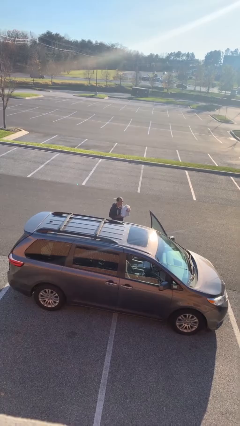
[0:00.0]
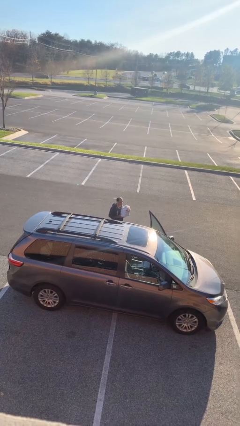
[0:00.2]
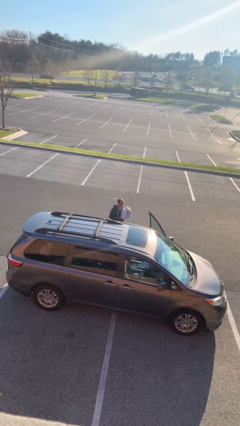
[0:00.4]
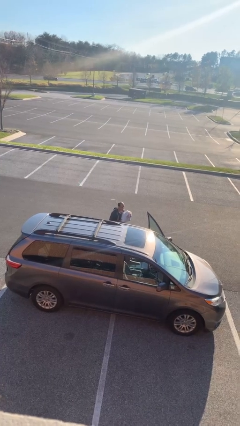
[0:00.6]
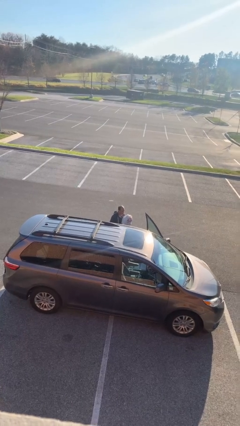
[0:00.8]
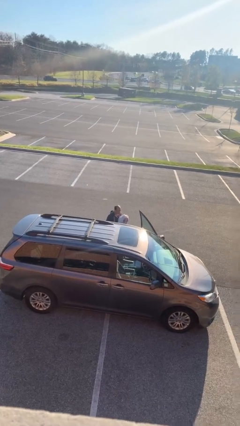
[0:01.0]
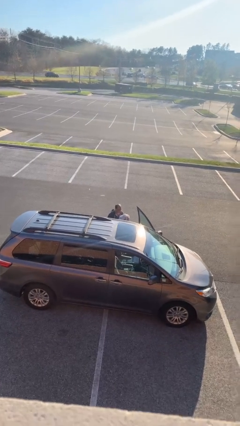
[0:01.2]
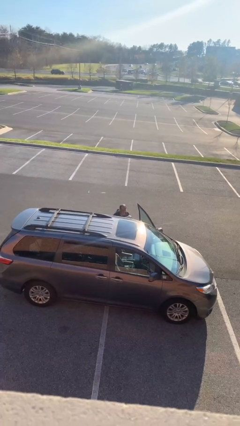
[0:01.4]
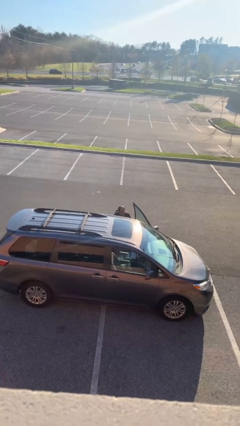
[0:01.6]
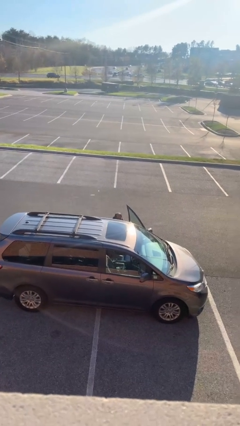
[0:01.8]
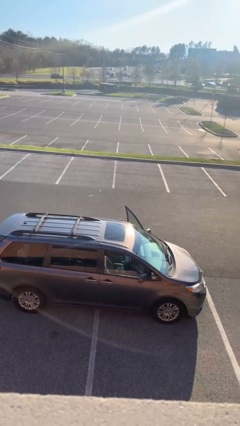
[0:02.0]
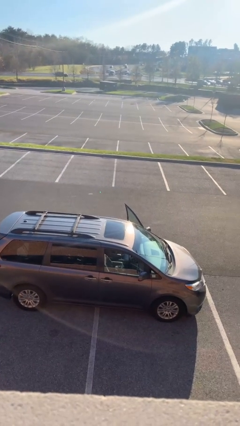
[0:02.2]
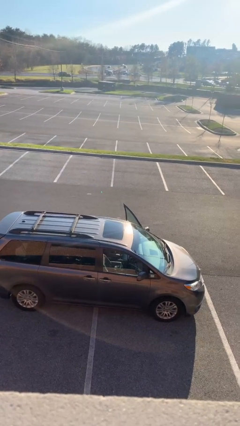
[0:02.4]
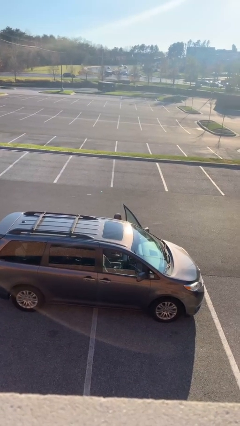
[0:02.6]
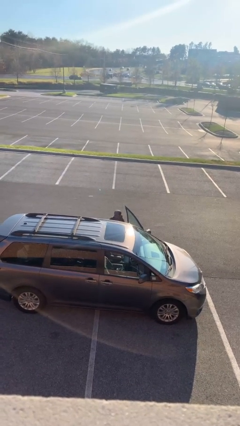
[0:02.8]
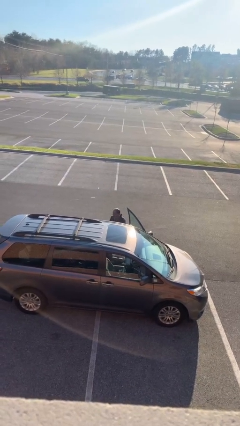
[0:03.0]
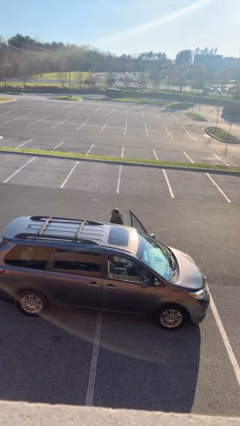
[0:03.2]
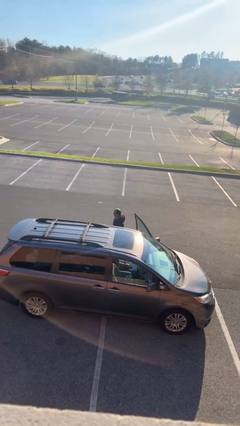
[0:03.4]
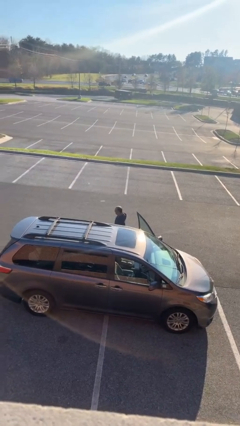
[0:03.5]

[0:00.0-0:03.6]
person loads car

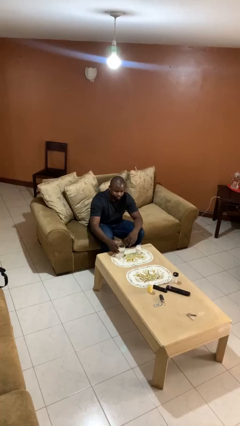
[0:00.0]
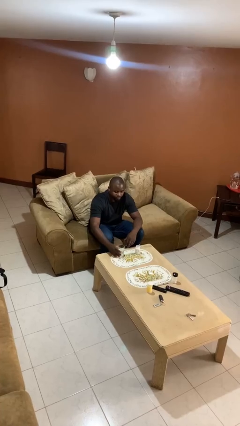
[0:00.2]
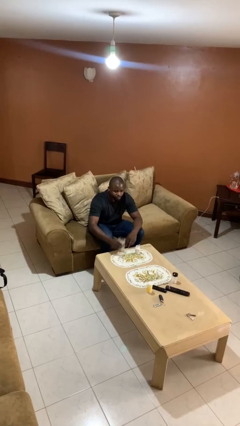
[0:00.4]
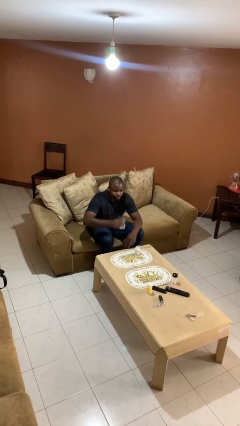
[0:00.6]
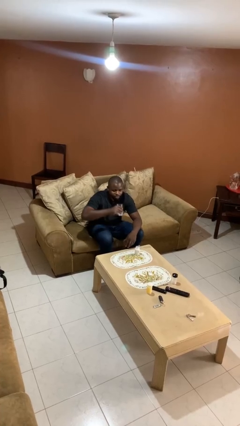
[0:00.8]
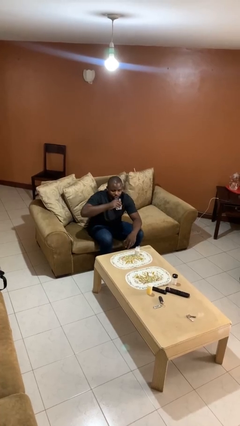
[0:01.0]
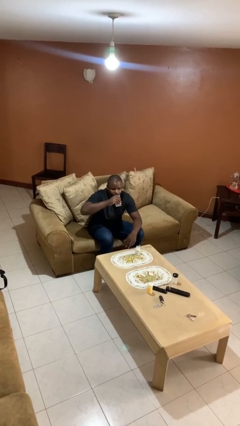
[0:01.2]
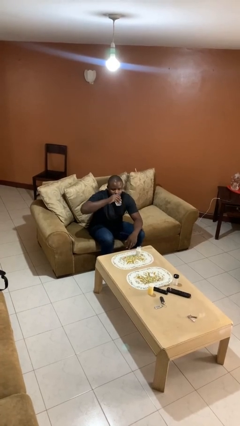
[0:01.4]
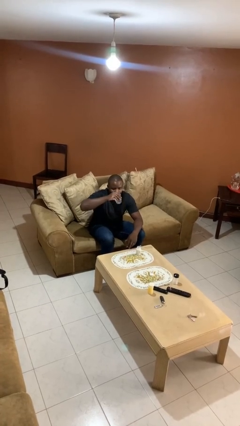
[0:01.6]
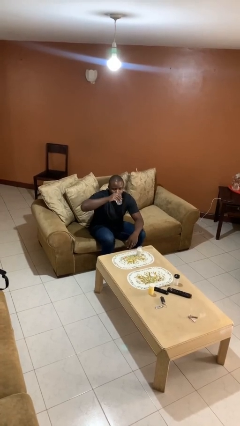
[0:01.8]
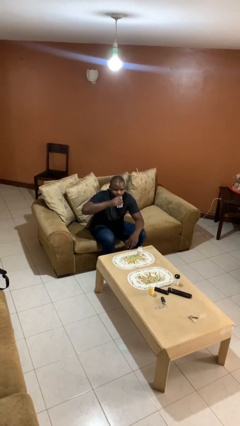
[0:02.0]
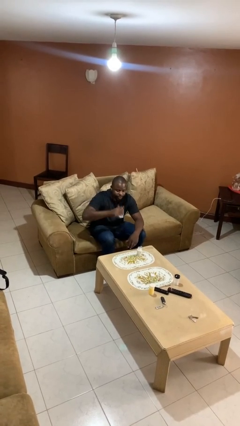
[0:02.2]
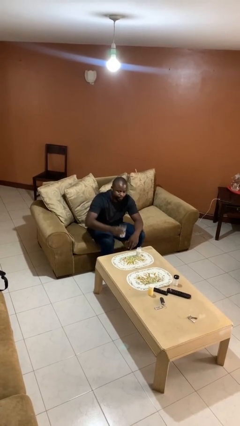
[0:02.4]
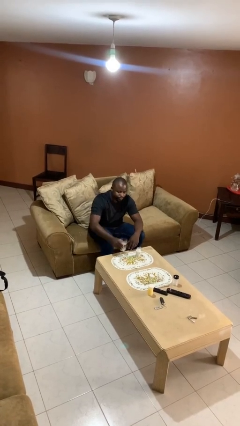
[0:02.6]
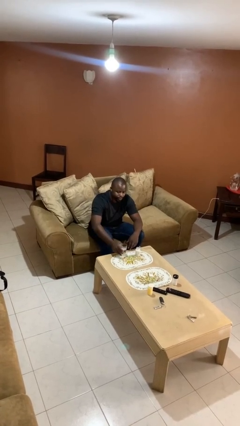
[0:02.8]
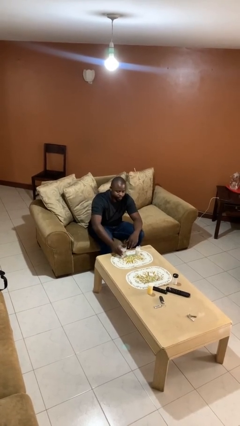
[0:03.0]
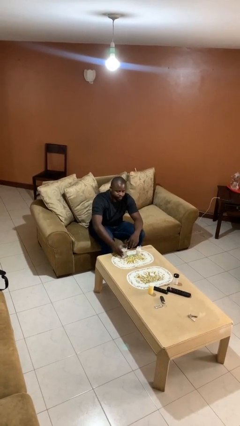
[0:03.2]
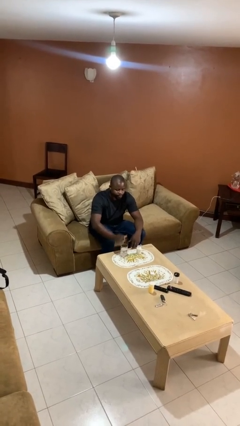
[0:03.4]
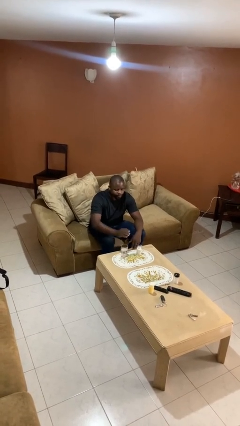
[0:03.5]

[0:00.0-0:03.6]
person drinks from cup

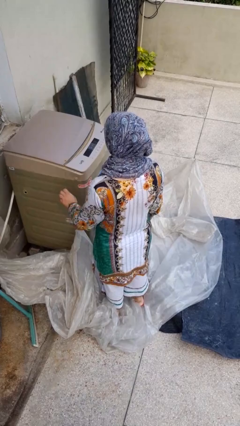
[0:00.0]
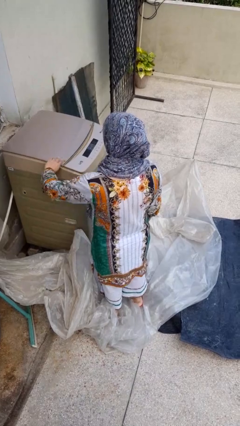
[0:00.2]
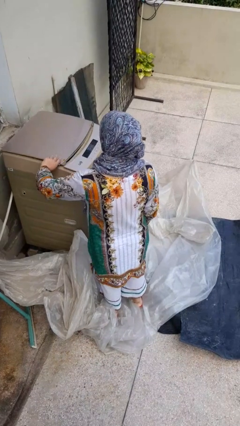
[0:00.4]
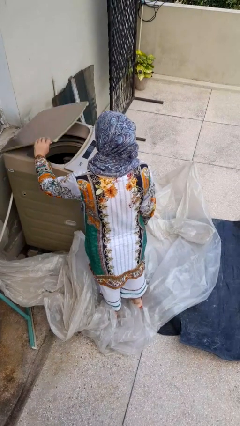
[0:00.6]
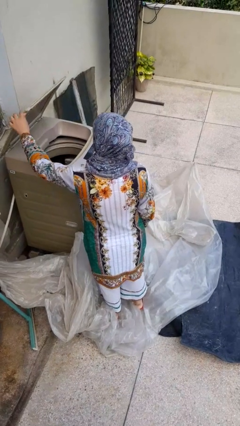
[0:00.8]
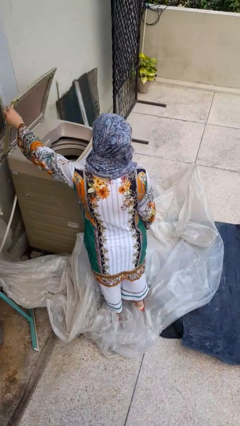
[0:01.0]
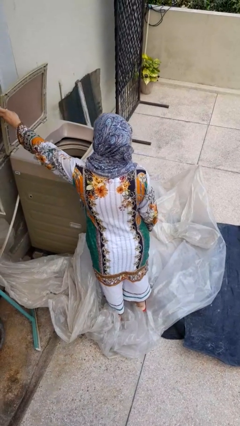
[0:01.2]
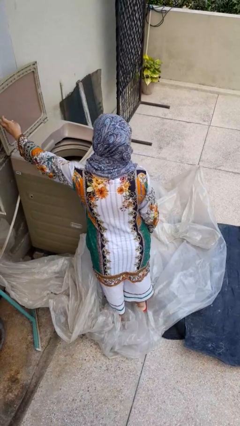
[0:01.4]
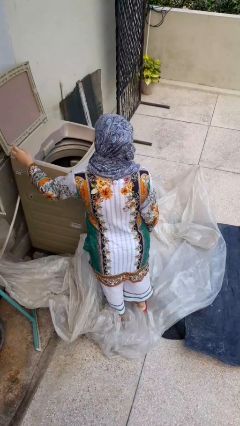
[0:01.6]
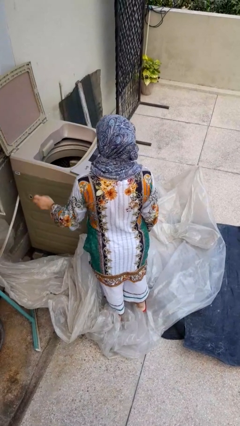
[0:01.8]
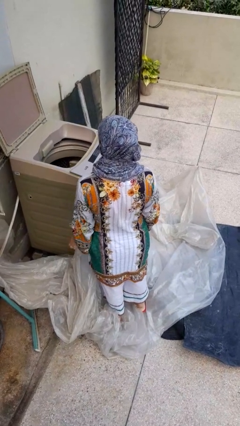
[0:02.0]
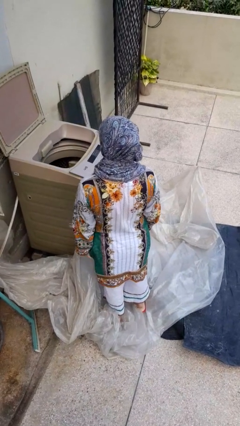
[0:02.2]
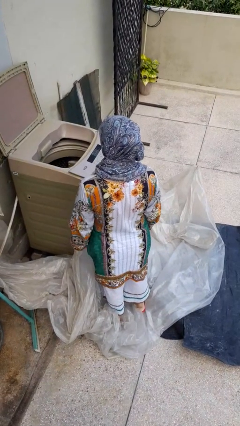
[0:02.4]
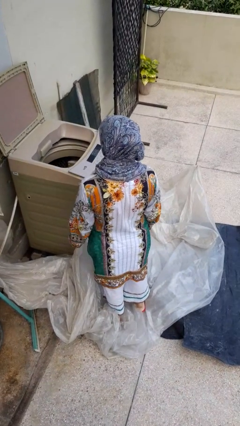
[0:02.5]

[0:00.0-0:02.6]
person opens clothes washer

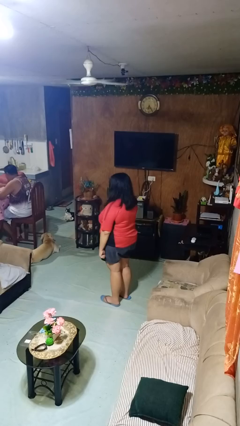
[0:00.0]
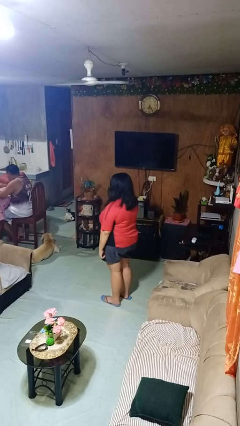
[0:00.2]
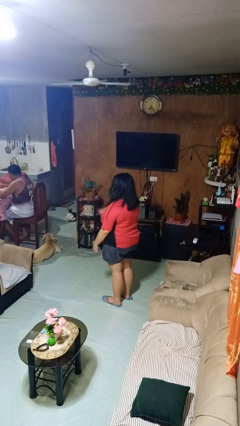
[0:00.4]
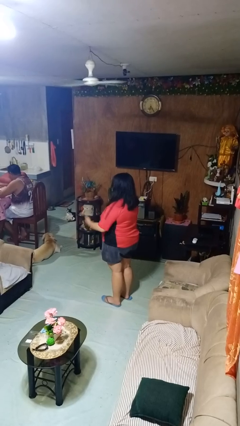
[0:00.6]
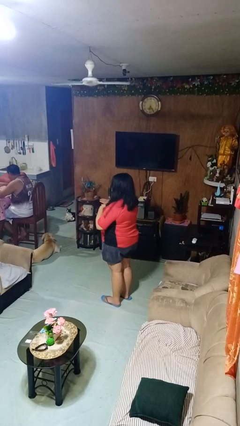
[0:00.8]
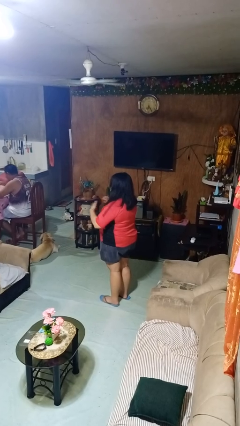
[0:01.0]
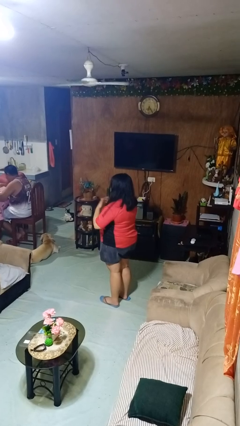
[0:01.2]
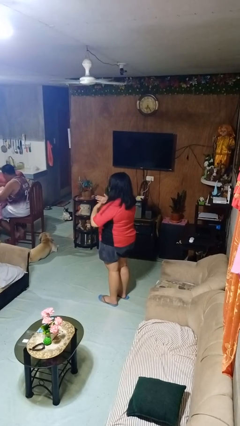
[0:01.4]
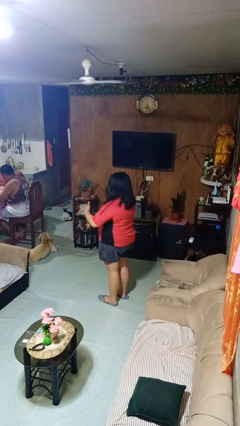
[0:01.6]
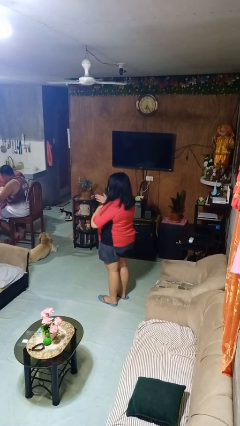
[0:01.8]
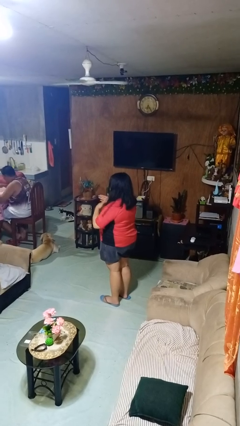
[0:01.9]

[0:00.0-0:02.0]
person drums on chest

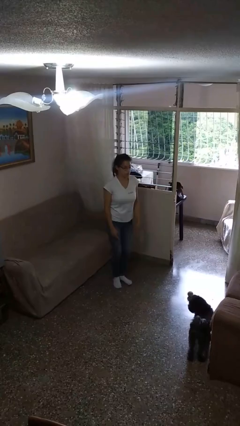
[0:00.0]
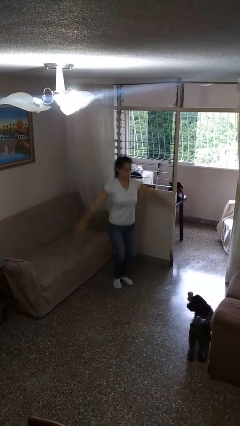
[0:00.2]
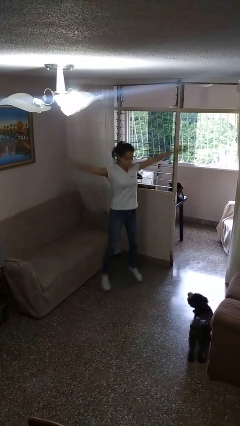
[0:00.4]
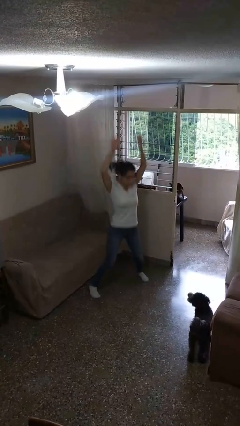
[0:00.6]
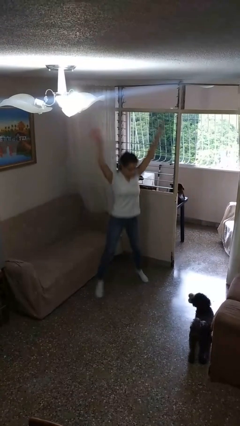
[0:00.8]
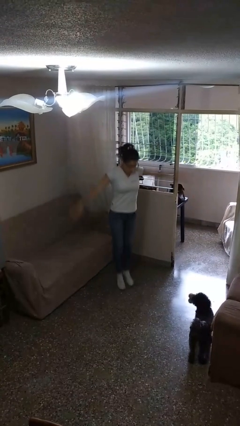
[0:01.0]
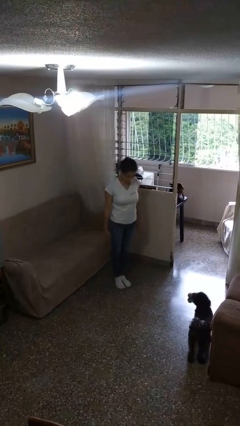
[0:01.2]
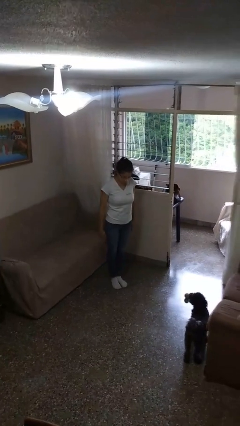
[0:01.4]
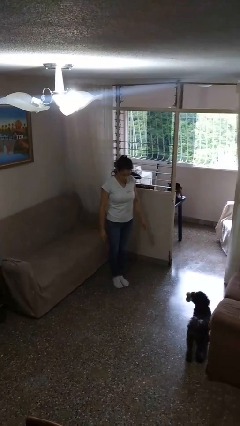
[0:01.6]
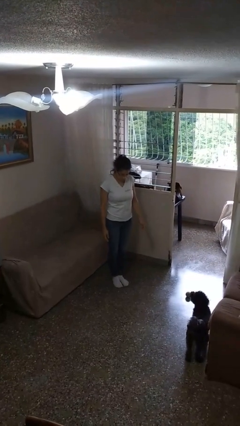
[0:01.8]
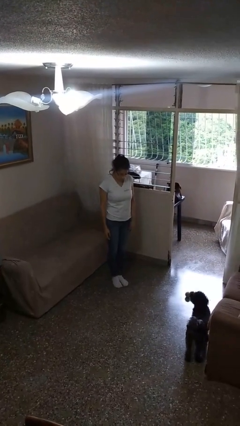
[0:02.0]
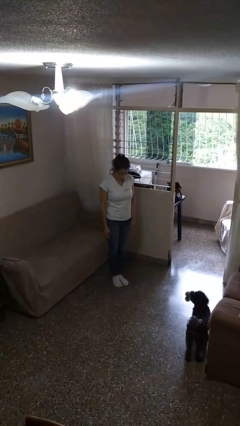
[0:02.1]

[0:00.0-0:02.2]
person exercises with jumping jacks

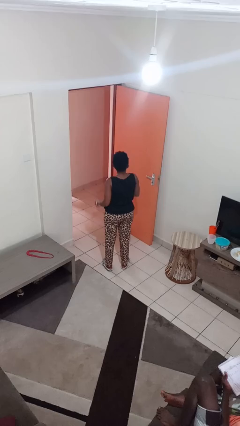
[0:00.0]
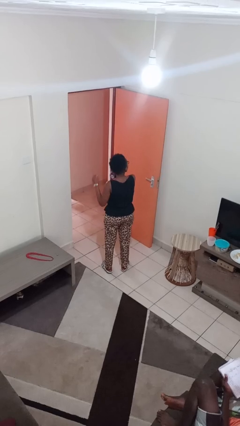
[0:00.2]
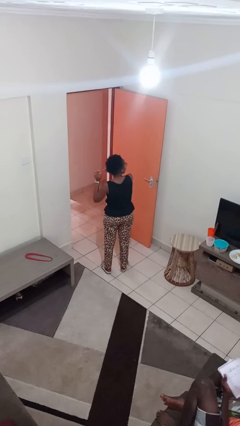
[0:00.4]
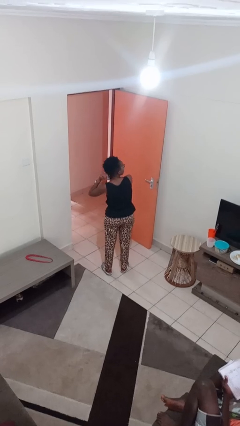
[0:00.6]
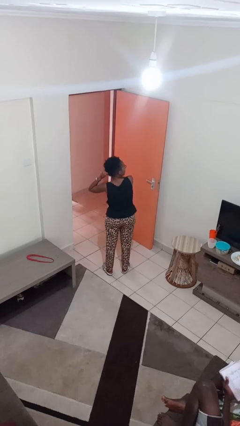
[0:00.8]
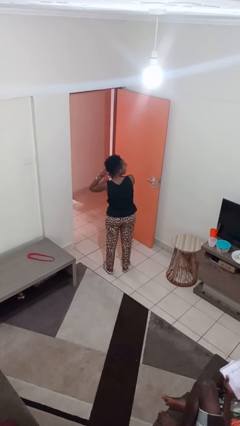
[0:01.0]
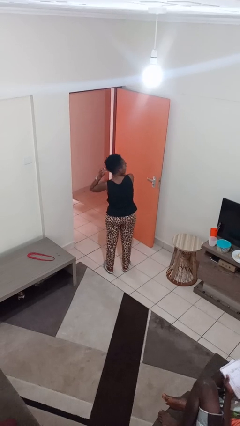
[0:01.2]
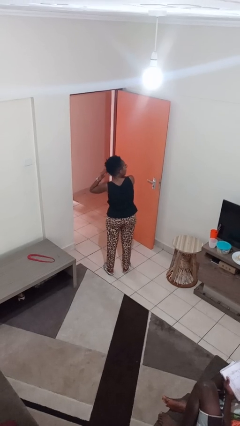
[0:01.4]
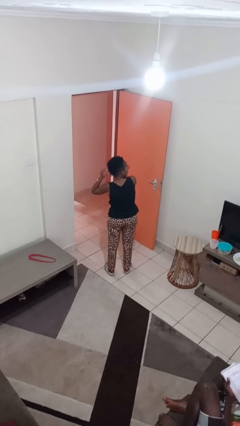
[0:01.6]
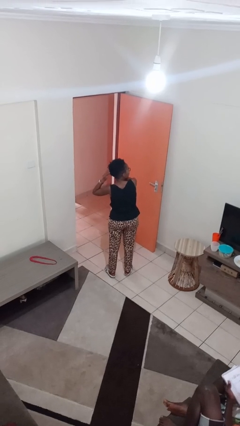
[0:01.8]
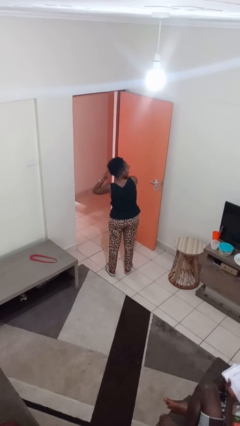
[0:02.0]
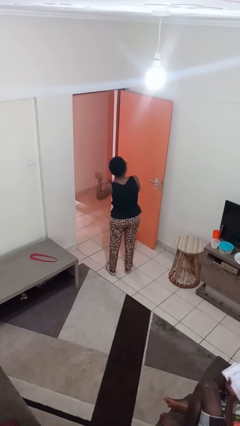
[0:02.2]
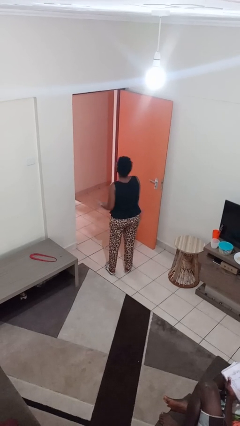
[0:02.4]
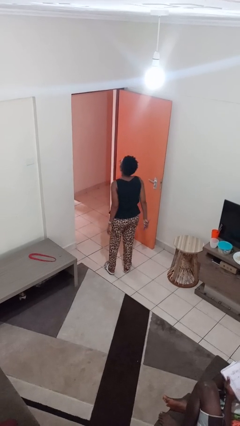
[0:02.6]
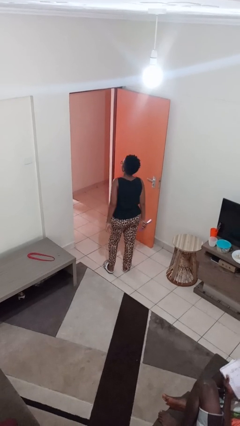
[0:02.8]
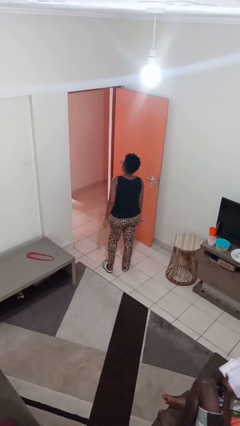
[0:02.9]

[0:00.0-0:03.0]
person brushes hair

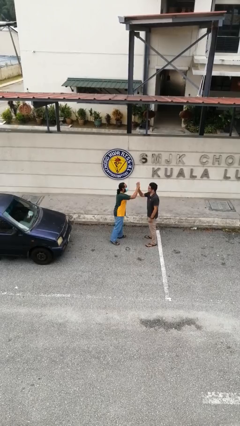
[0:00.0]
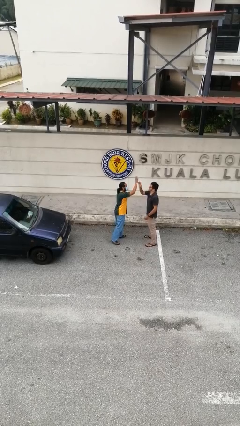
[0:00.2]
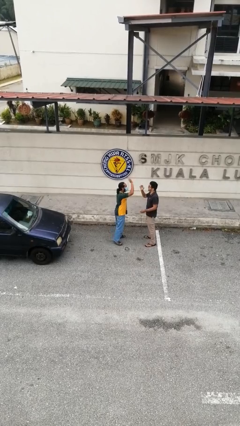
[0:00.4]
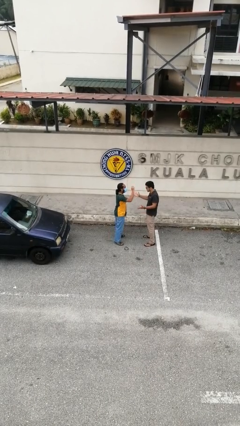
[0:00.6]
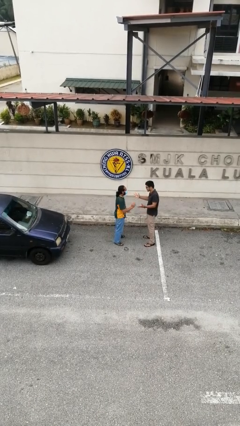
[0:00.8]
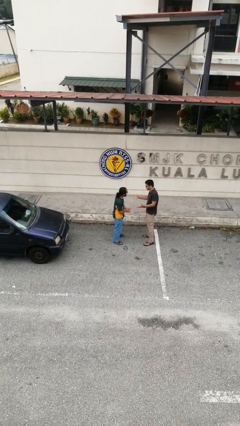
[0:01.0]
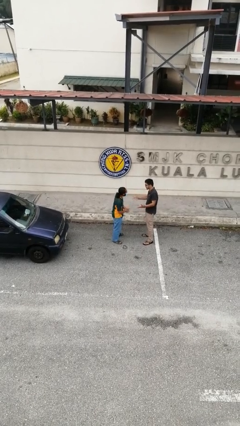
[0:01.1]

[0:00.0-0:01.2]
person highfives hand
